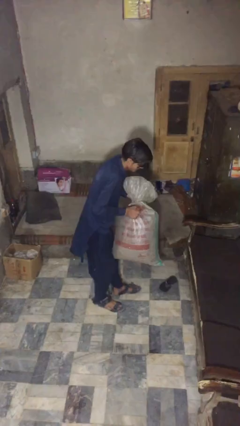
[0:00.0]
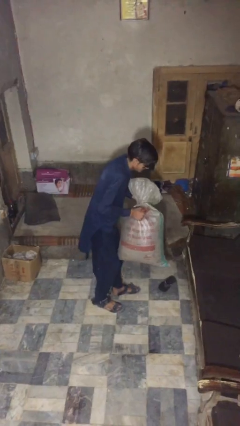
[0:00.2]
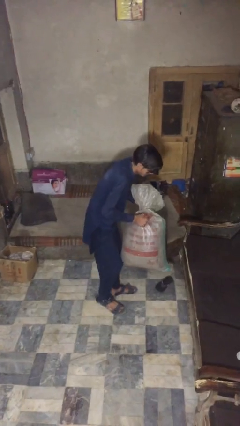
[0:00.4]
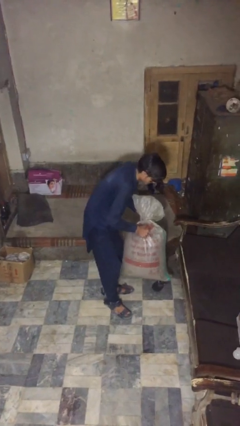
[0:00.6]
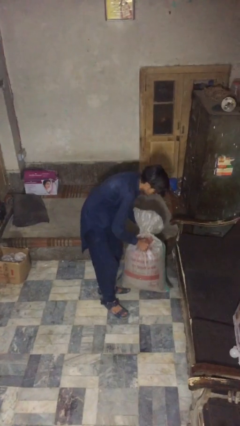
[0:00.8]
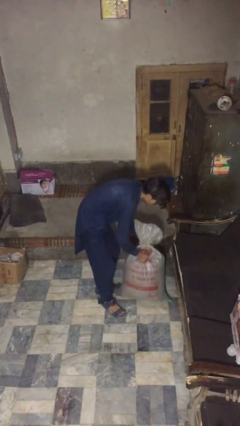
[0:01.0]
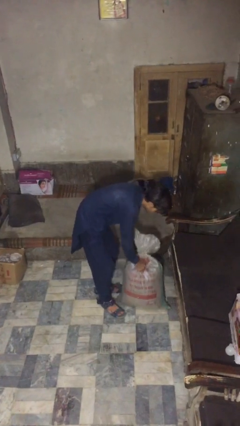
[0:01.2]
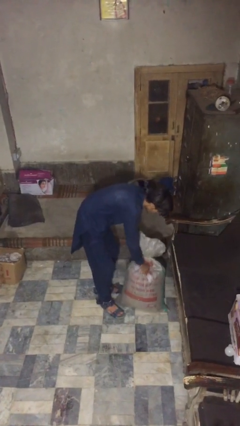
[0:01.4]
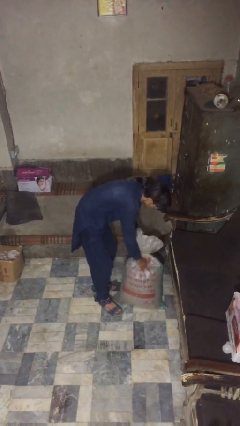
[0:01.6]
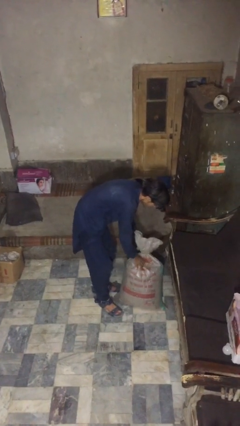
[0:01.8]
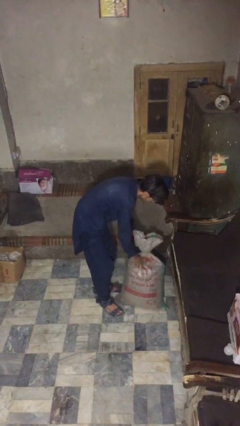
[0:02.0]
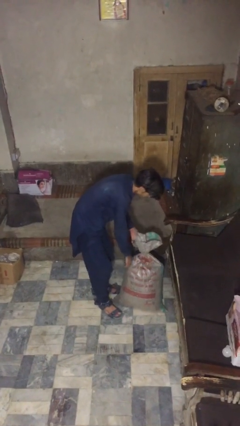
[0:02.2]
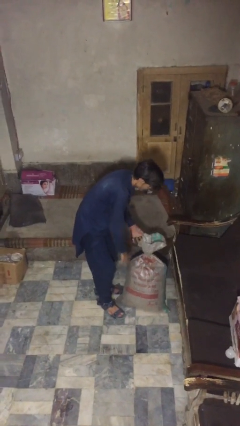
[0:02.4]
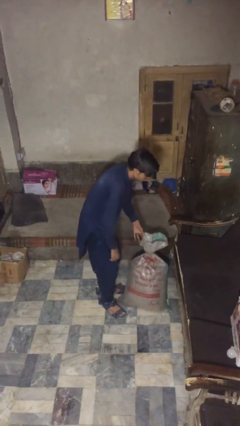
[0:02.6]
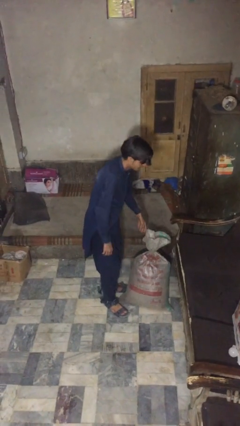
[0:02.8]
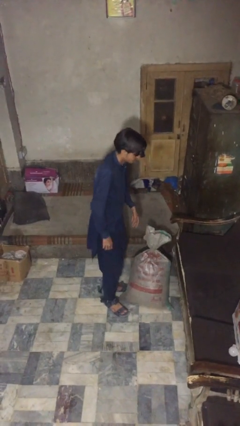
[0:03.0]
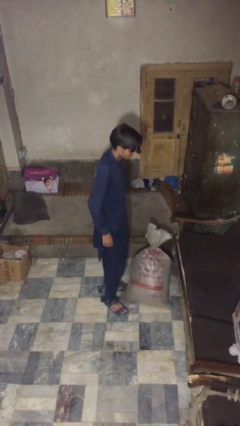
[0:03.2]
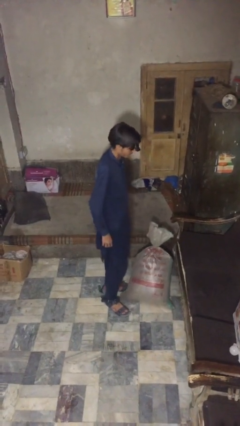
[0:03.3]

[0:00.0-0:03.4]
person puts down object on floor

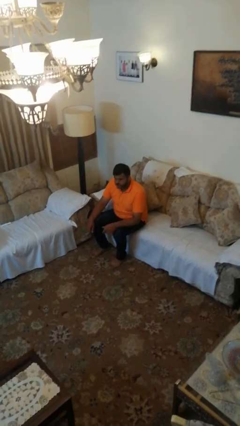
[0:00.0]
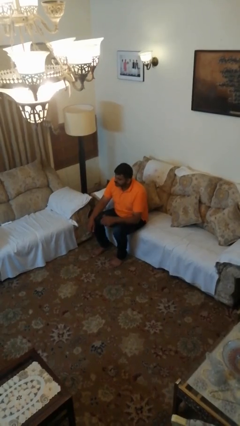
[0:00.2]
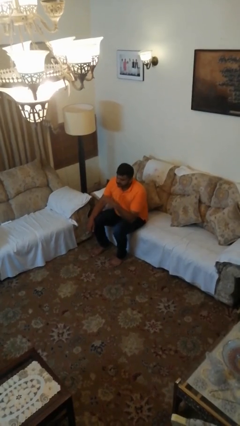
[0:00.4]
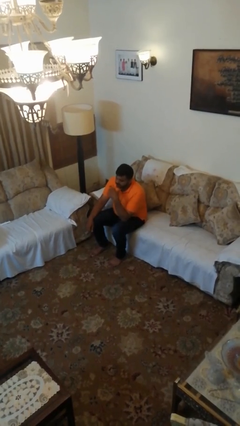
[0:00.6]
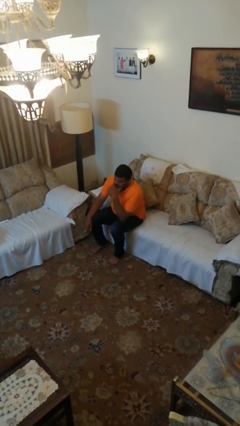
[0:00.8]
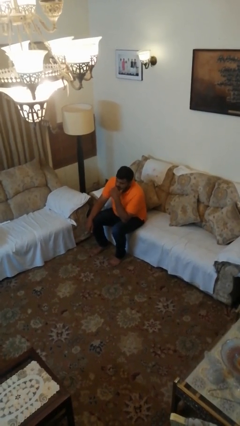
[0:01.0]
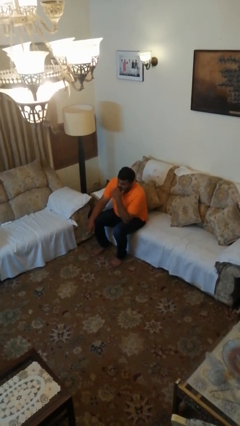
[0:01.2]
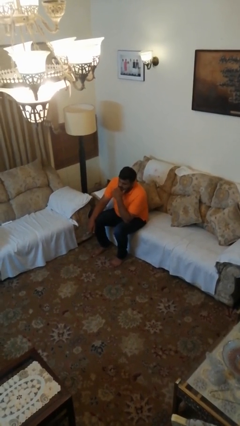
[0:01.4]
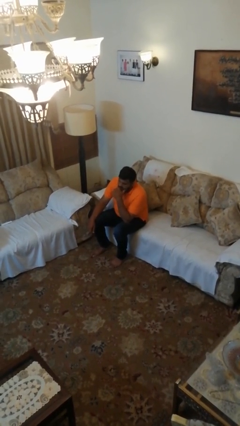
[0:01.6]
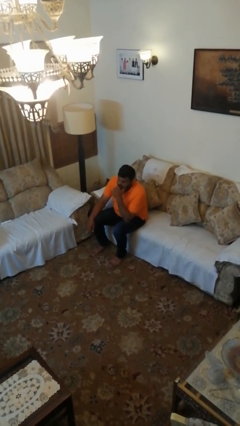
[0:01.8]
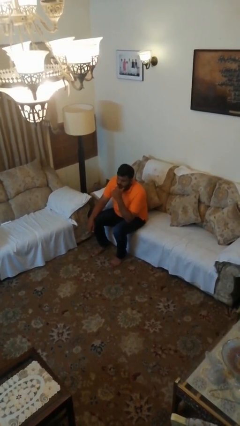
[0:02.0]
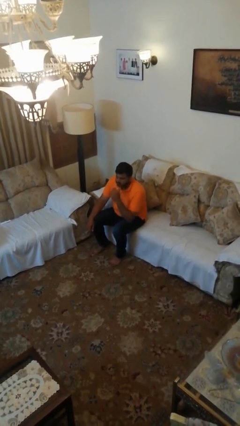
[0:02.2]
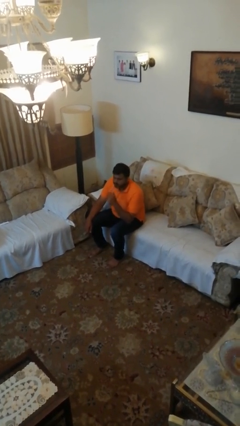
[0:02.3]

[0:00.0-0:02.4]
person strokes chin

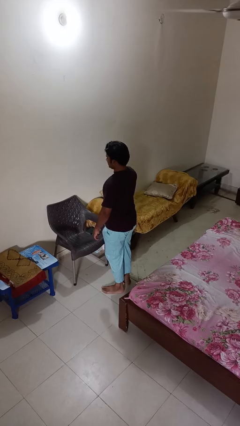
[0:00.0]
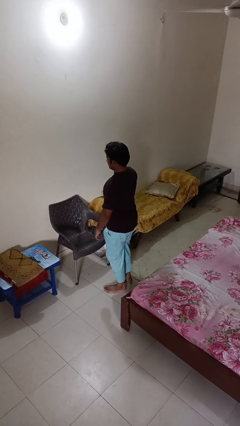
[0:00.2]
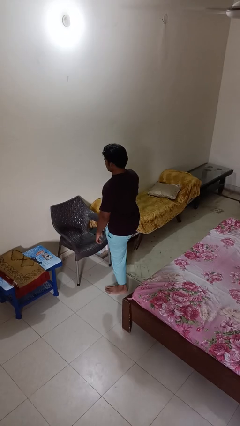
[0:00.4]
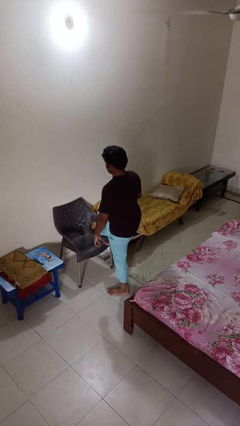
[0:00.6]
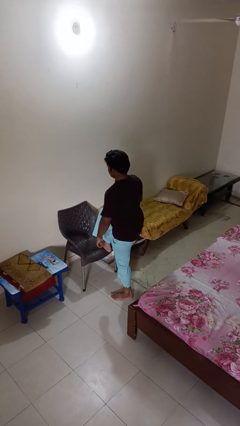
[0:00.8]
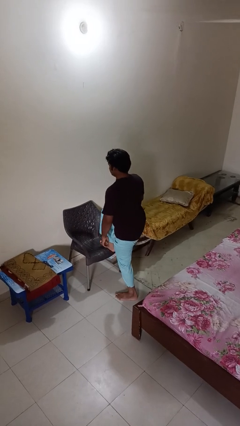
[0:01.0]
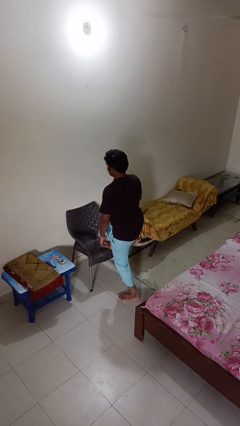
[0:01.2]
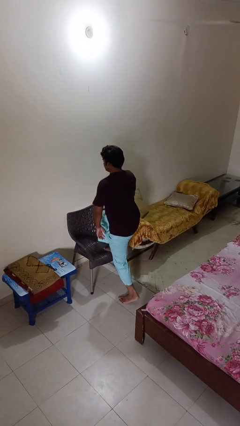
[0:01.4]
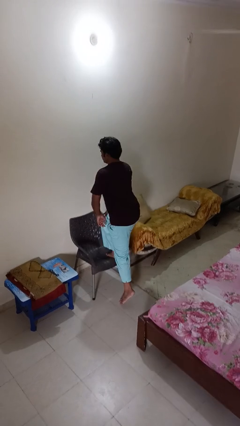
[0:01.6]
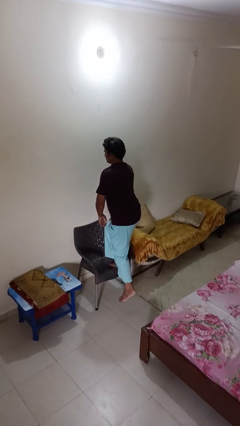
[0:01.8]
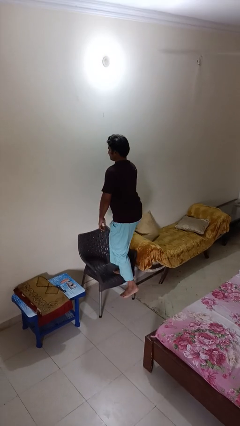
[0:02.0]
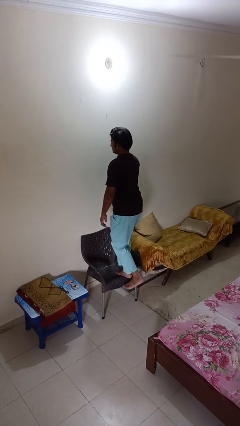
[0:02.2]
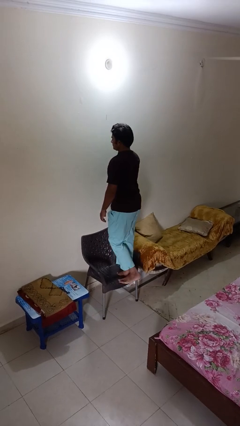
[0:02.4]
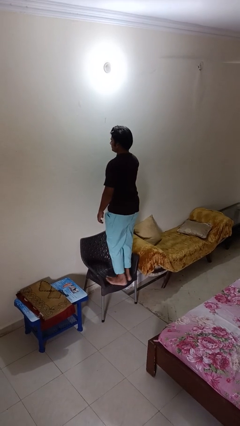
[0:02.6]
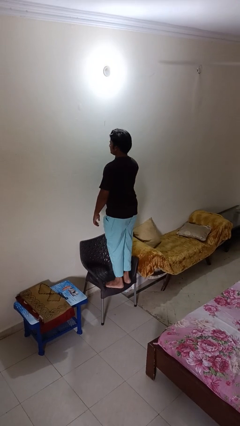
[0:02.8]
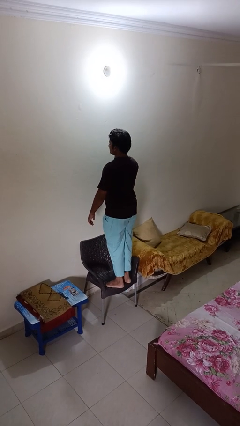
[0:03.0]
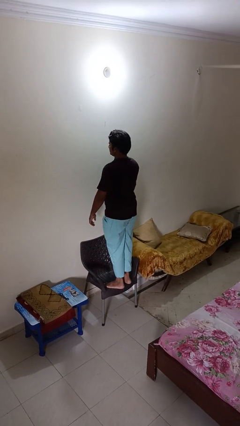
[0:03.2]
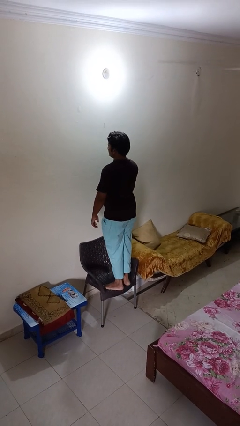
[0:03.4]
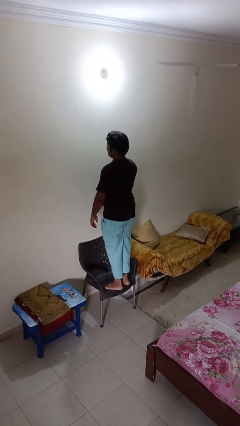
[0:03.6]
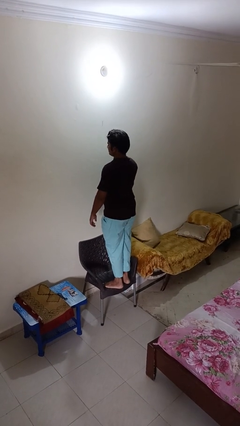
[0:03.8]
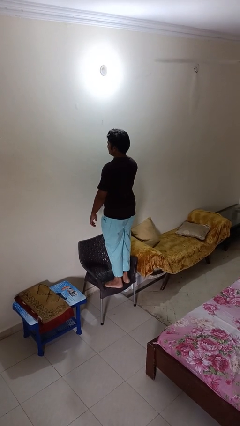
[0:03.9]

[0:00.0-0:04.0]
person climbs on chair

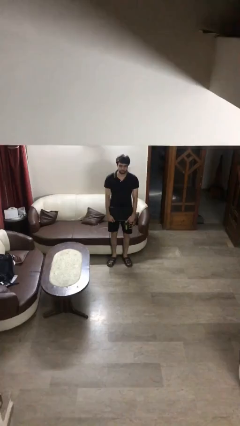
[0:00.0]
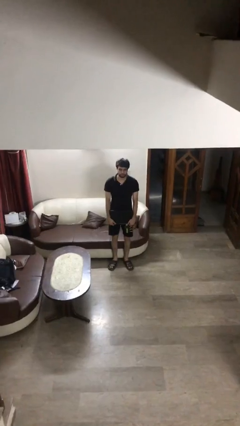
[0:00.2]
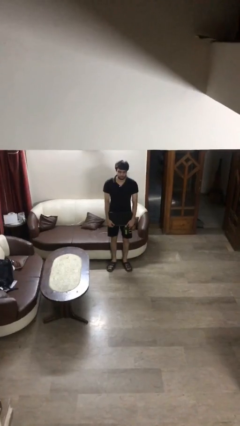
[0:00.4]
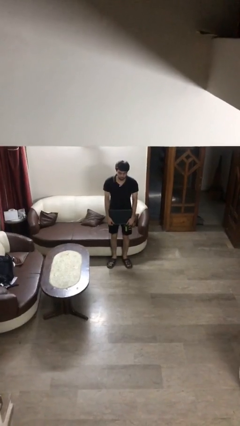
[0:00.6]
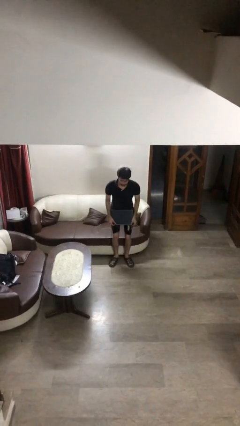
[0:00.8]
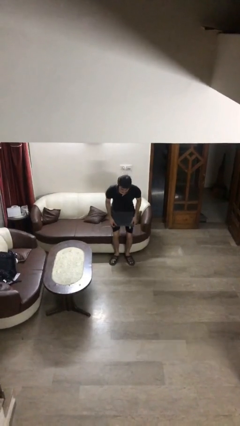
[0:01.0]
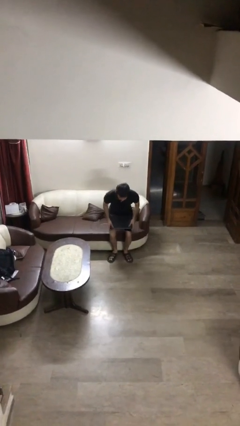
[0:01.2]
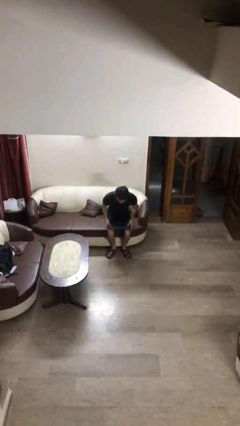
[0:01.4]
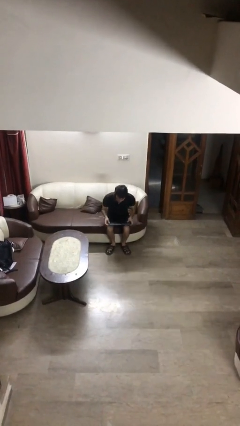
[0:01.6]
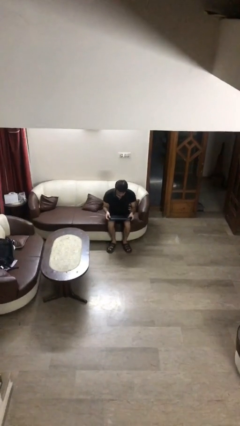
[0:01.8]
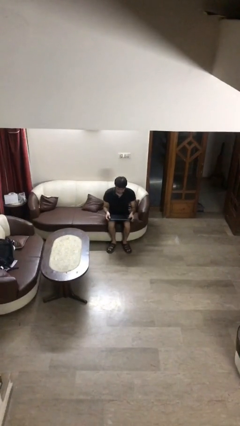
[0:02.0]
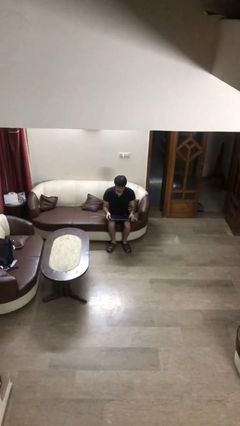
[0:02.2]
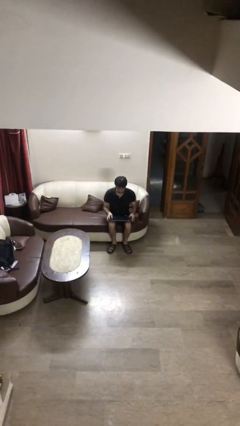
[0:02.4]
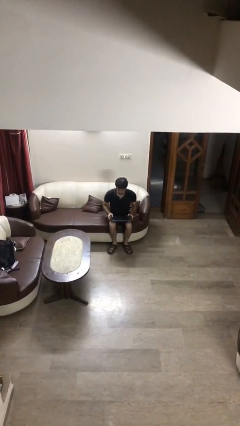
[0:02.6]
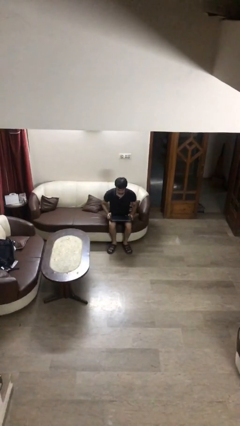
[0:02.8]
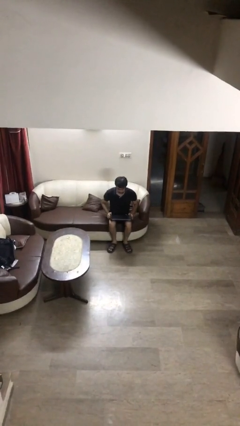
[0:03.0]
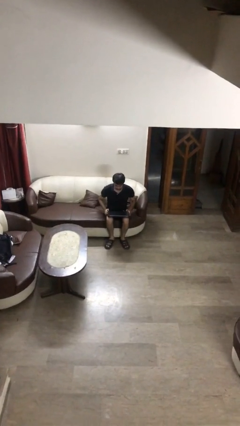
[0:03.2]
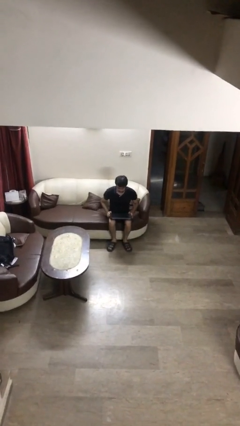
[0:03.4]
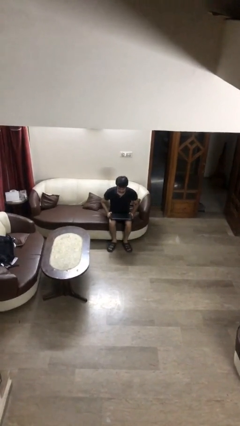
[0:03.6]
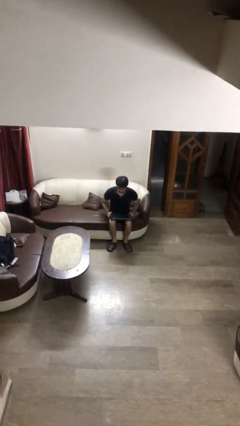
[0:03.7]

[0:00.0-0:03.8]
person sits down

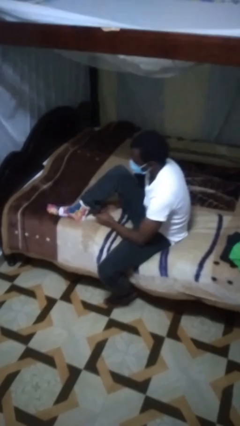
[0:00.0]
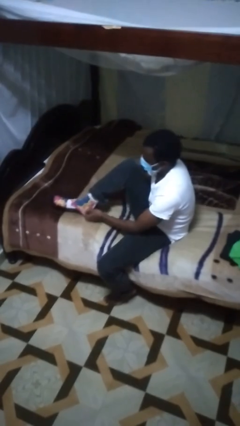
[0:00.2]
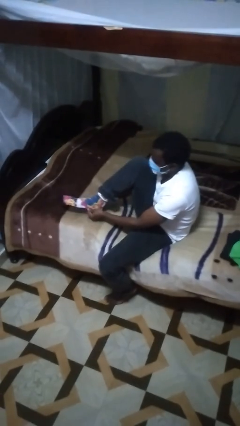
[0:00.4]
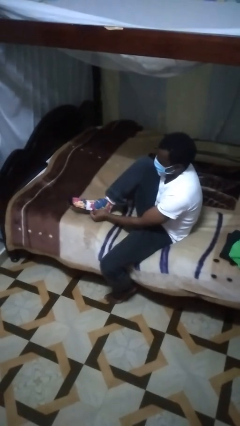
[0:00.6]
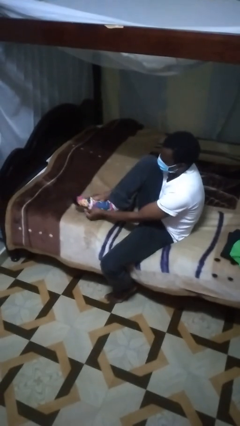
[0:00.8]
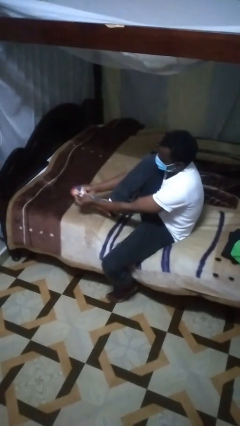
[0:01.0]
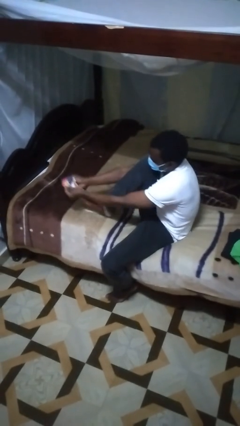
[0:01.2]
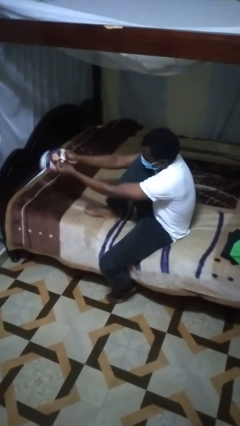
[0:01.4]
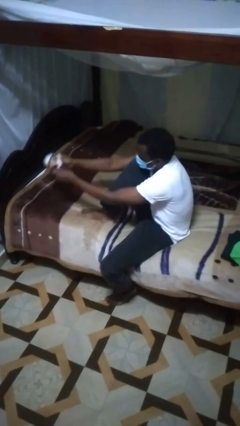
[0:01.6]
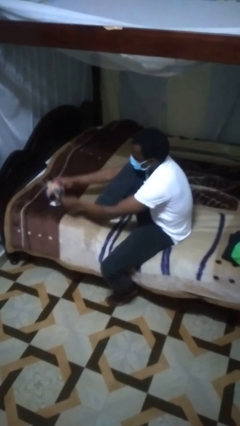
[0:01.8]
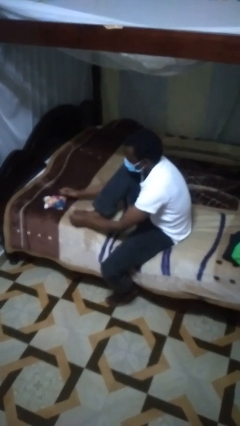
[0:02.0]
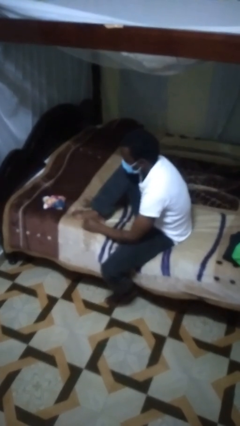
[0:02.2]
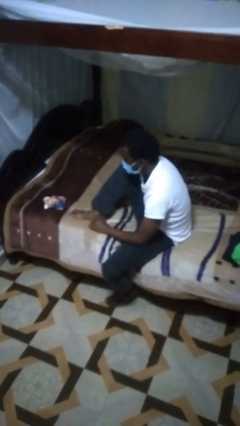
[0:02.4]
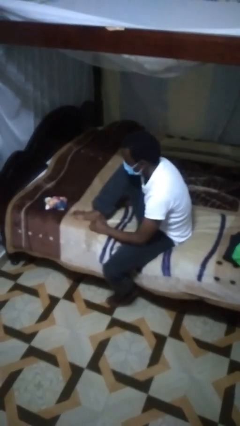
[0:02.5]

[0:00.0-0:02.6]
person takes off socks

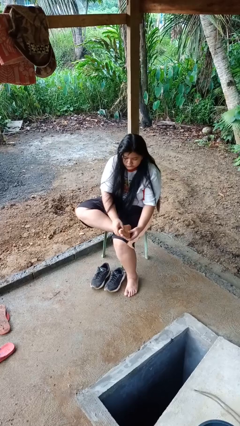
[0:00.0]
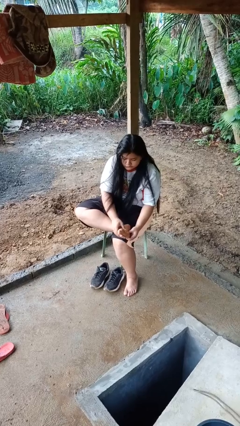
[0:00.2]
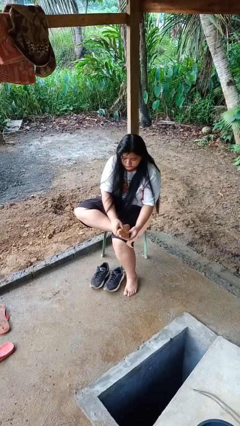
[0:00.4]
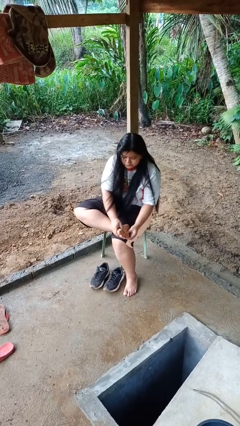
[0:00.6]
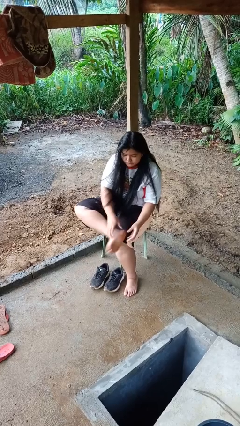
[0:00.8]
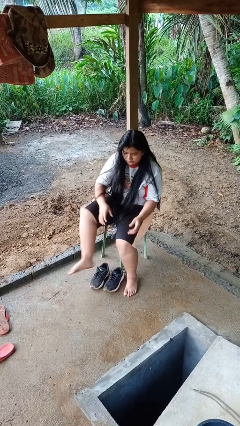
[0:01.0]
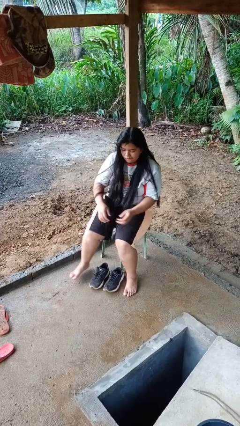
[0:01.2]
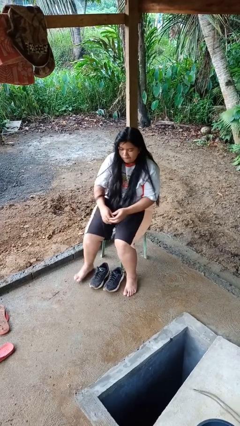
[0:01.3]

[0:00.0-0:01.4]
person rubs foot
